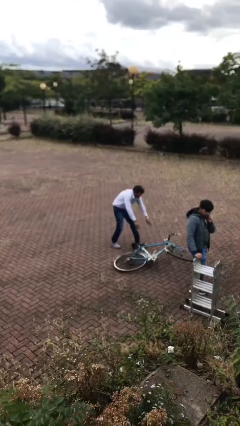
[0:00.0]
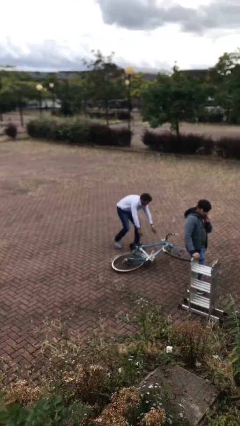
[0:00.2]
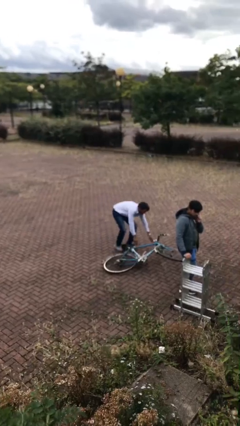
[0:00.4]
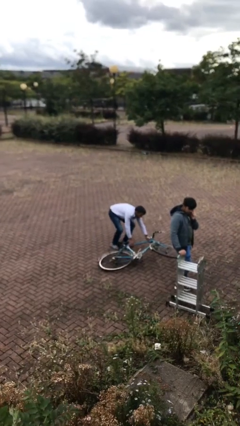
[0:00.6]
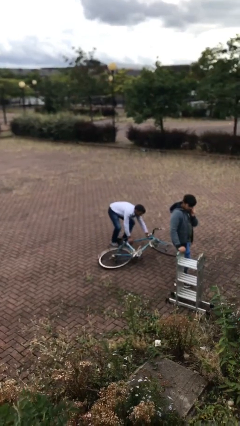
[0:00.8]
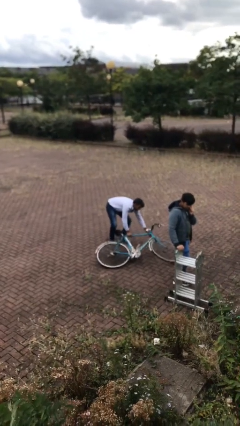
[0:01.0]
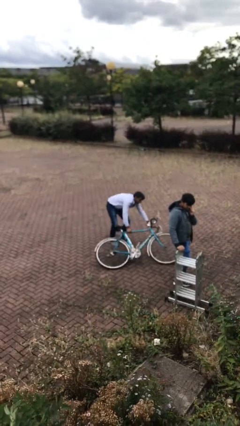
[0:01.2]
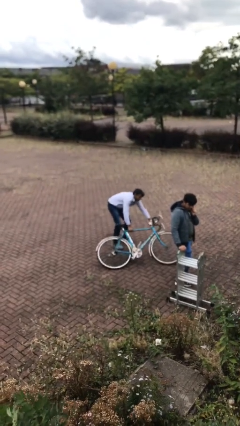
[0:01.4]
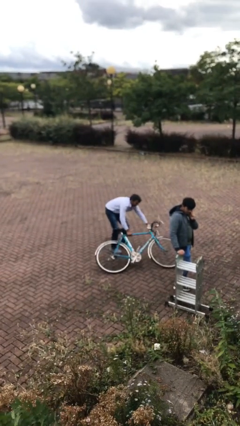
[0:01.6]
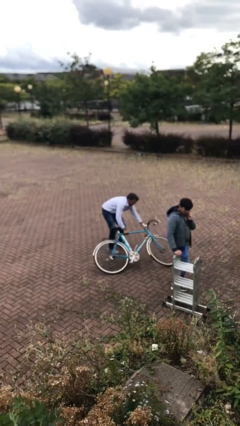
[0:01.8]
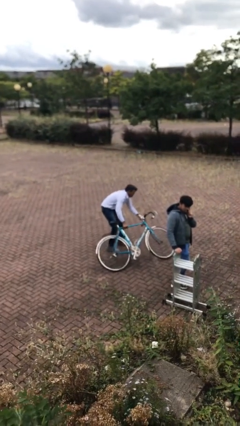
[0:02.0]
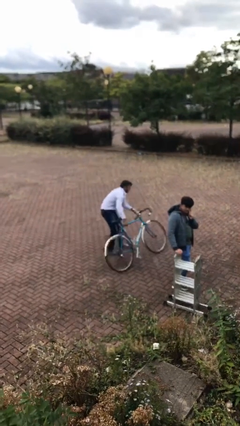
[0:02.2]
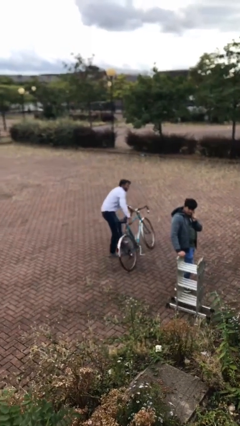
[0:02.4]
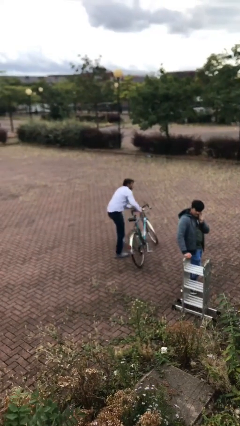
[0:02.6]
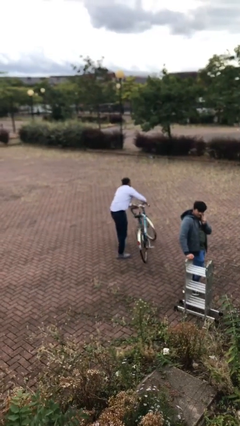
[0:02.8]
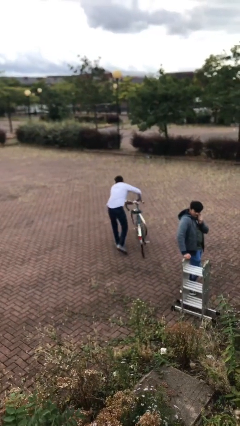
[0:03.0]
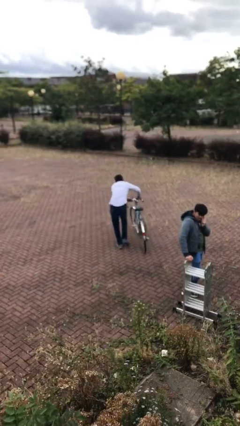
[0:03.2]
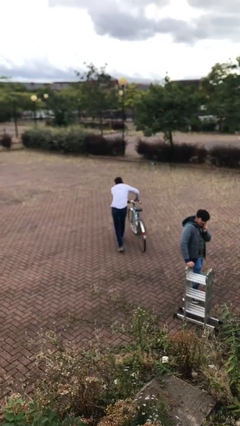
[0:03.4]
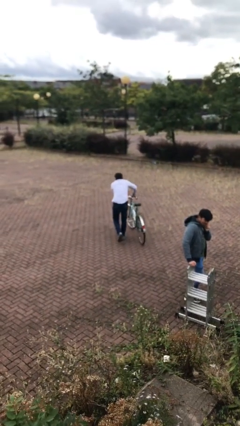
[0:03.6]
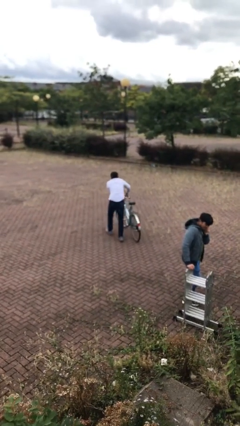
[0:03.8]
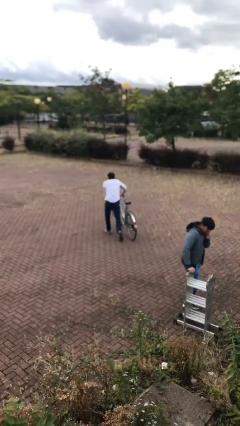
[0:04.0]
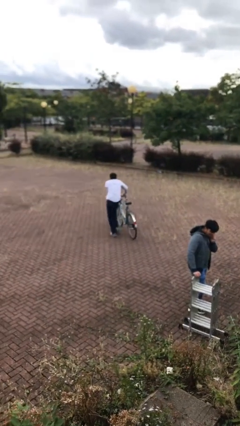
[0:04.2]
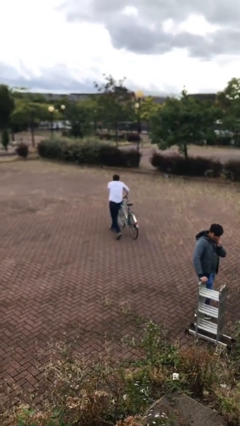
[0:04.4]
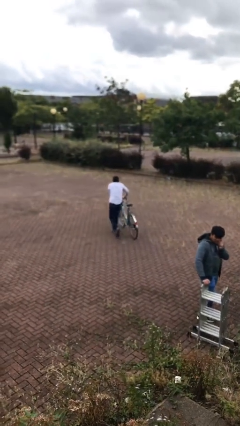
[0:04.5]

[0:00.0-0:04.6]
person steals object from person

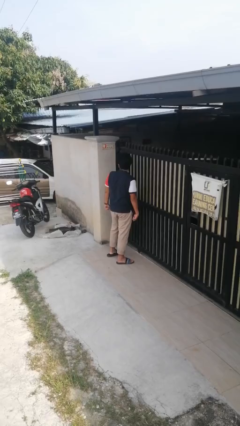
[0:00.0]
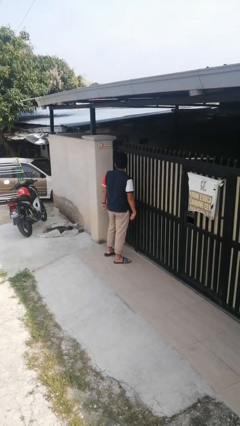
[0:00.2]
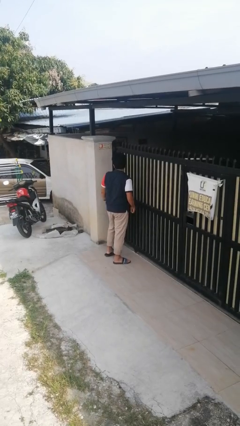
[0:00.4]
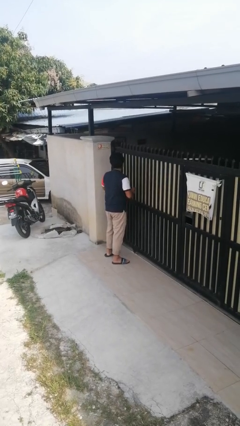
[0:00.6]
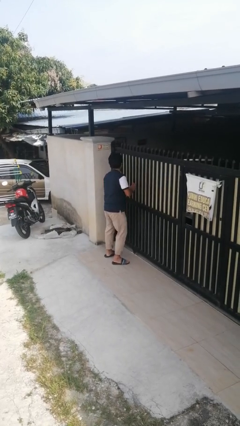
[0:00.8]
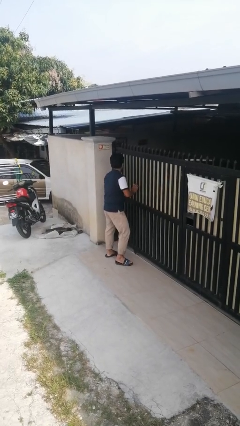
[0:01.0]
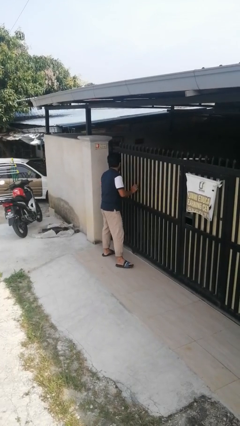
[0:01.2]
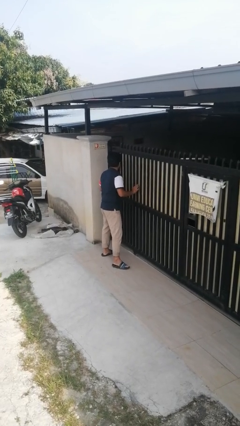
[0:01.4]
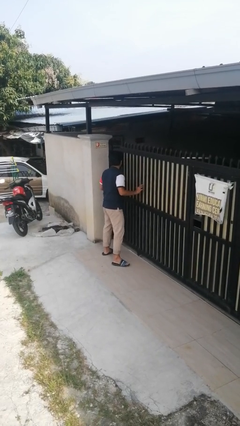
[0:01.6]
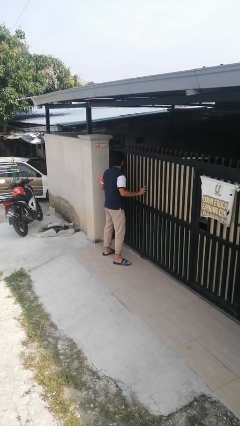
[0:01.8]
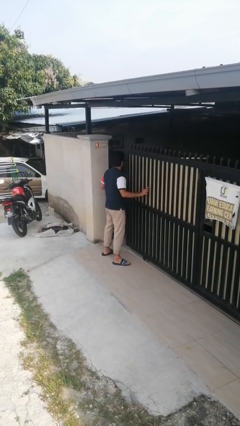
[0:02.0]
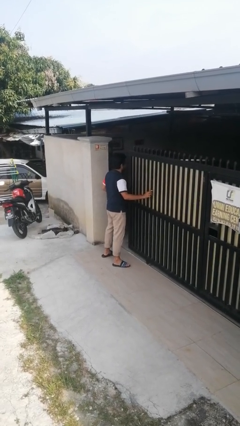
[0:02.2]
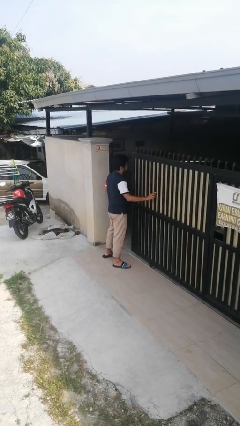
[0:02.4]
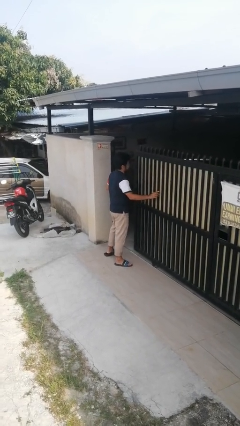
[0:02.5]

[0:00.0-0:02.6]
person opens sliding door

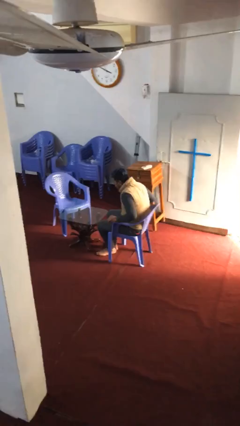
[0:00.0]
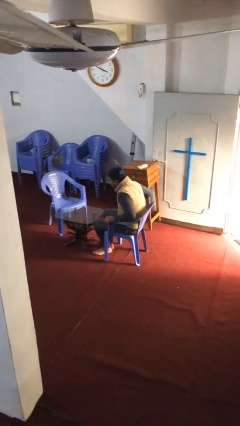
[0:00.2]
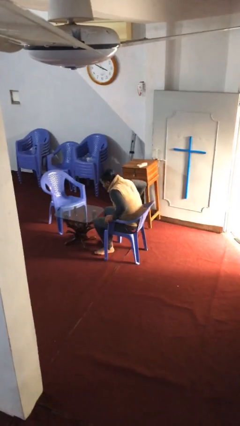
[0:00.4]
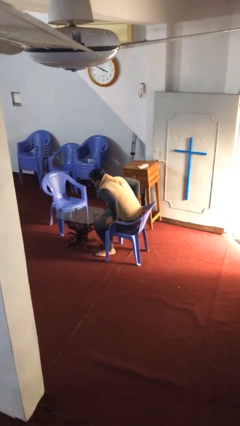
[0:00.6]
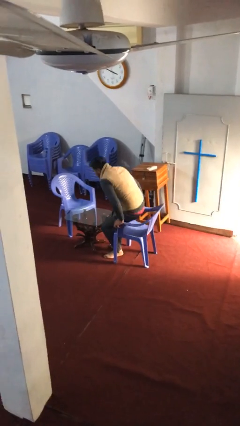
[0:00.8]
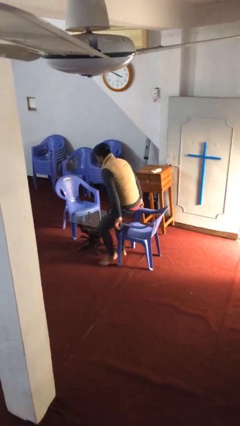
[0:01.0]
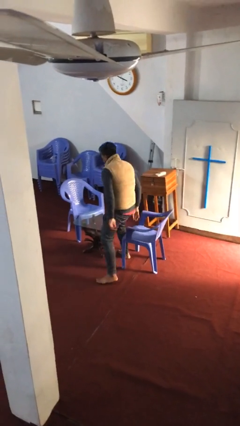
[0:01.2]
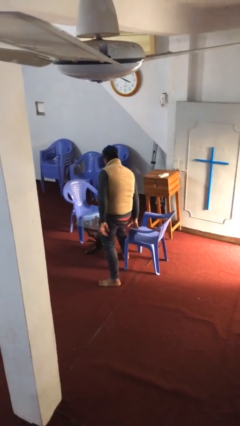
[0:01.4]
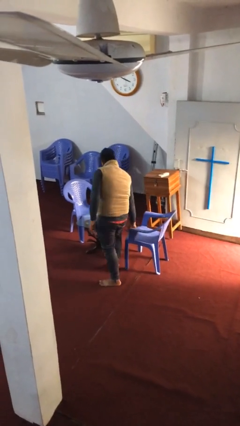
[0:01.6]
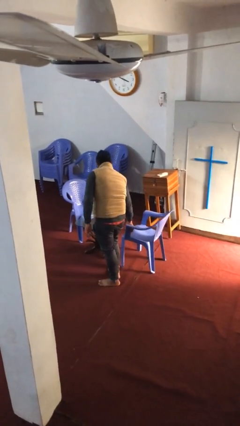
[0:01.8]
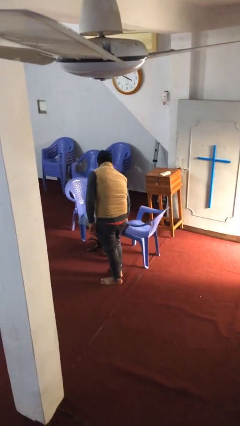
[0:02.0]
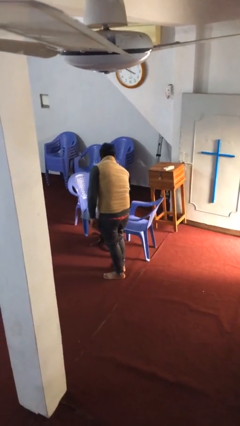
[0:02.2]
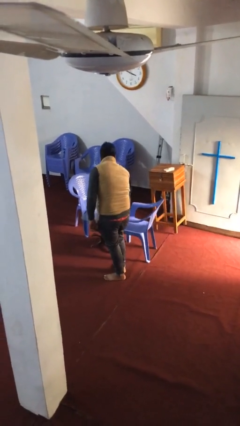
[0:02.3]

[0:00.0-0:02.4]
person stands up

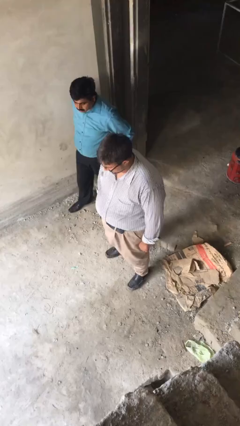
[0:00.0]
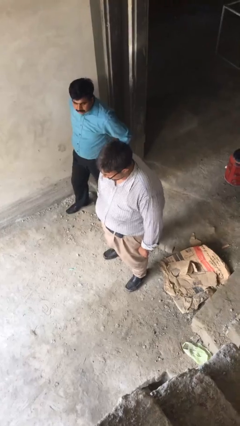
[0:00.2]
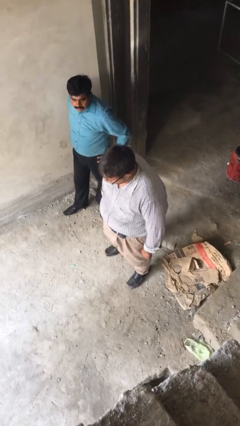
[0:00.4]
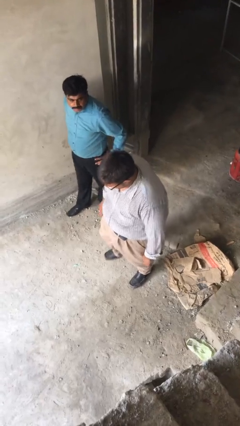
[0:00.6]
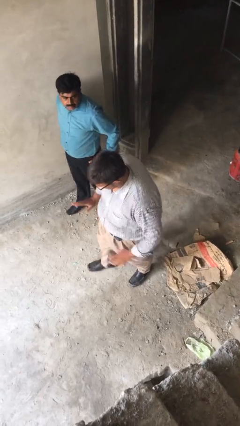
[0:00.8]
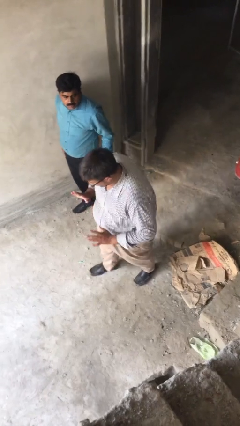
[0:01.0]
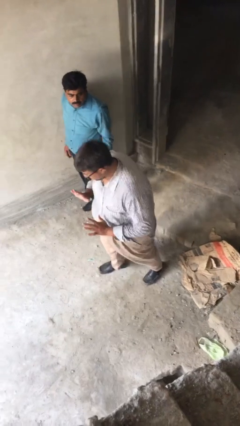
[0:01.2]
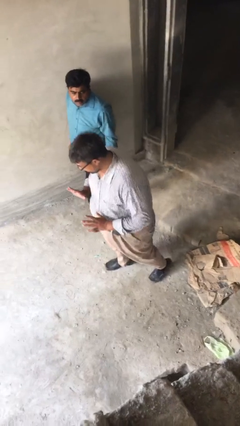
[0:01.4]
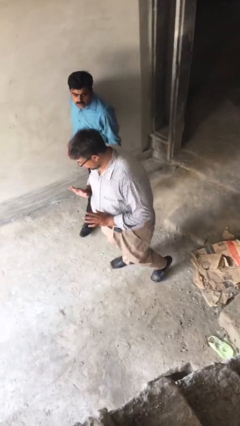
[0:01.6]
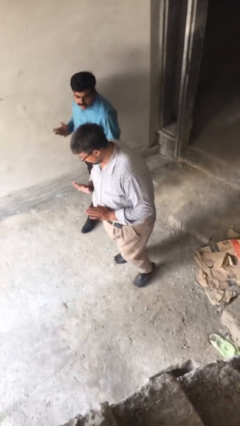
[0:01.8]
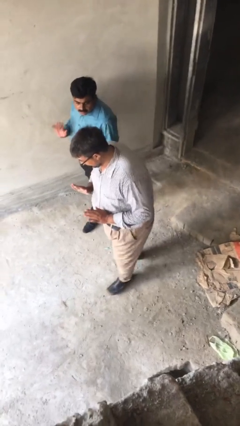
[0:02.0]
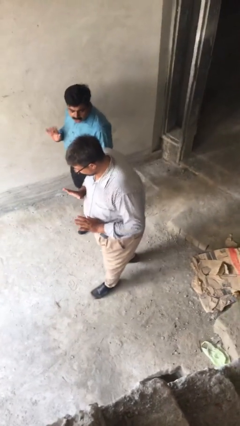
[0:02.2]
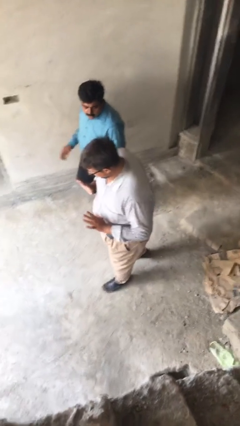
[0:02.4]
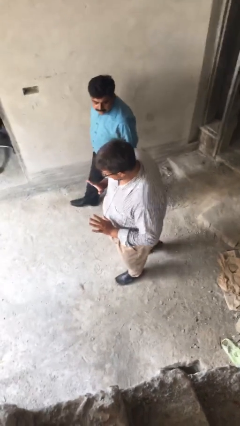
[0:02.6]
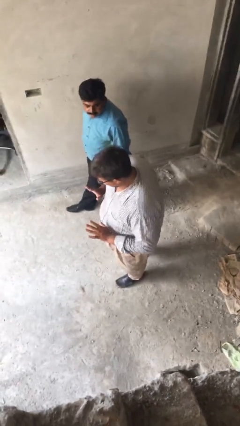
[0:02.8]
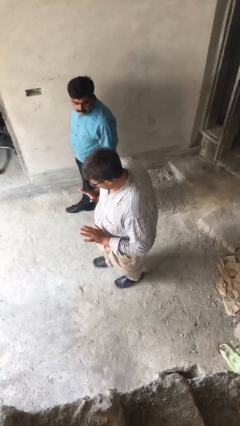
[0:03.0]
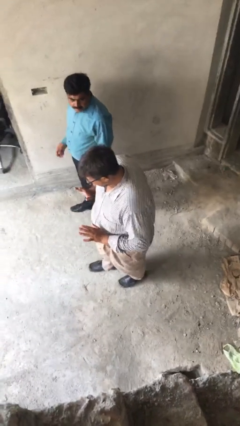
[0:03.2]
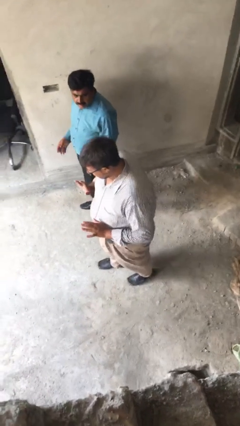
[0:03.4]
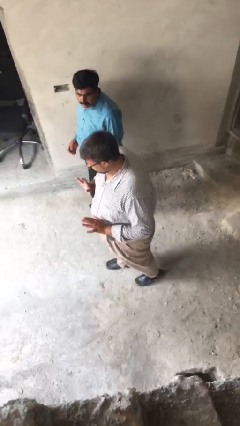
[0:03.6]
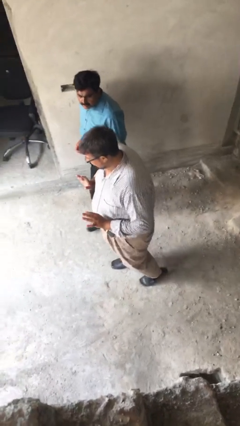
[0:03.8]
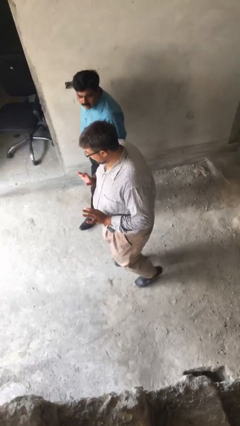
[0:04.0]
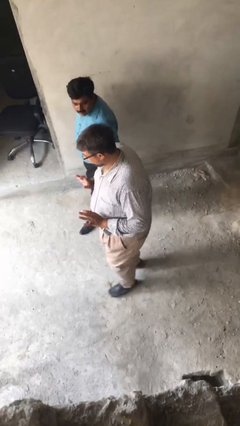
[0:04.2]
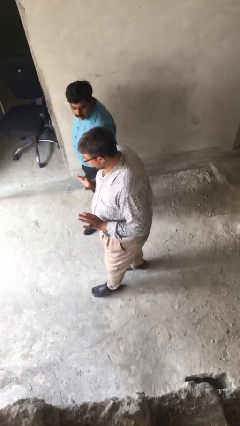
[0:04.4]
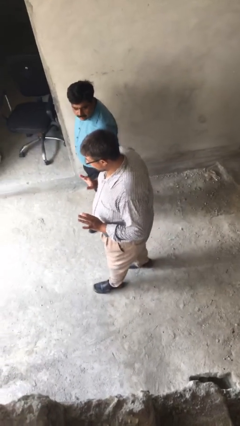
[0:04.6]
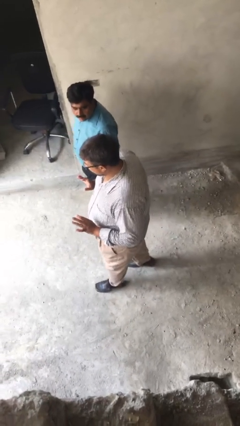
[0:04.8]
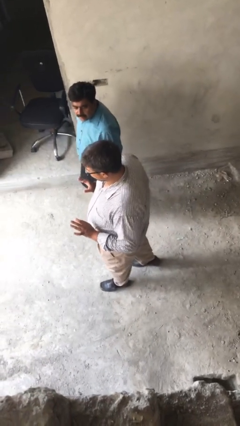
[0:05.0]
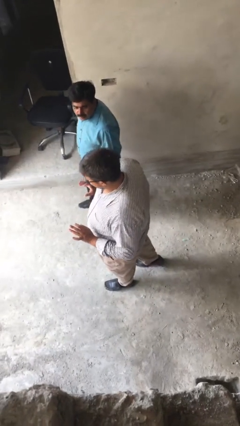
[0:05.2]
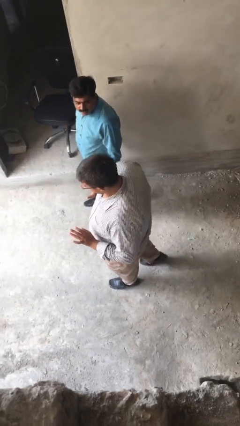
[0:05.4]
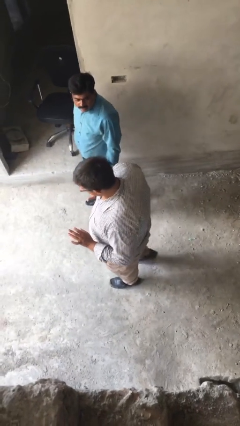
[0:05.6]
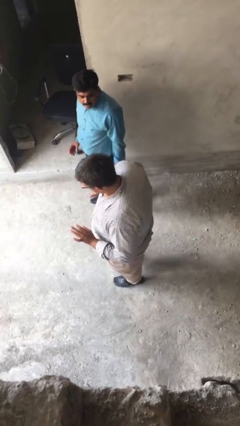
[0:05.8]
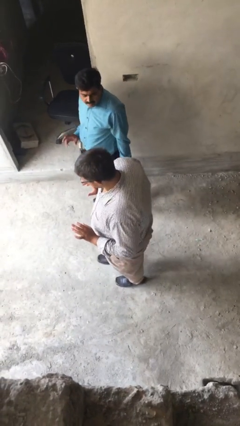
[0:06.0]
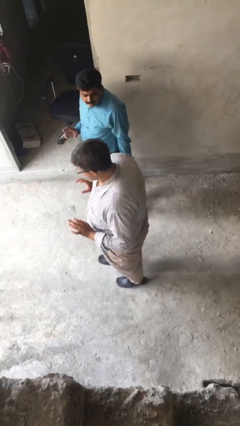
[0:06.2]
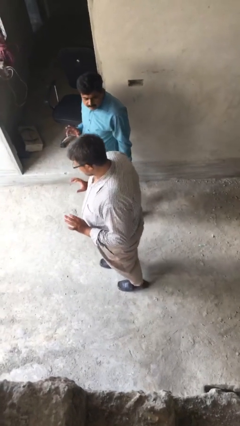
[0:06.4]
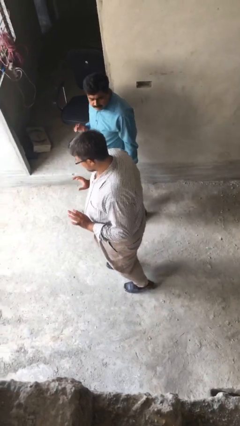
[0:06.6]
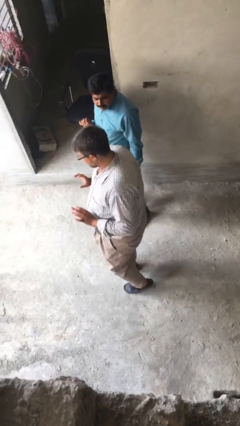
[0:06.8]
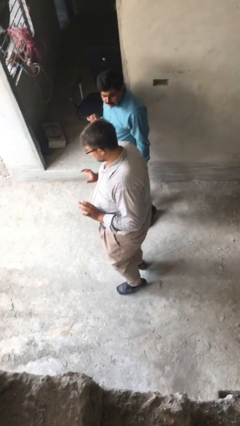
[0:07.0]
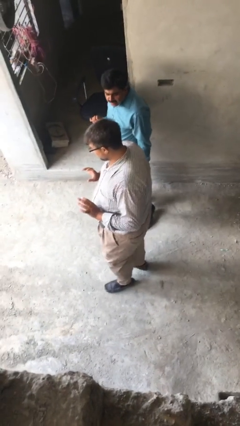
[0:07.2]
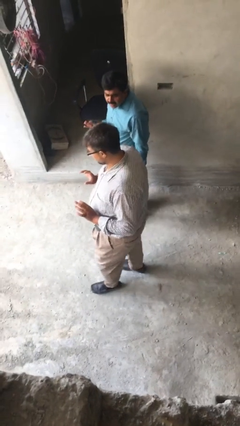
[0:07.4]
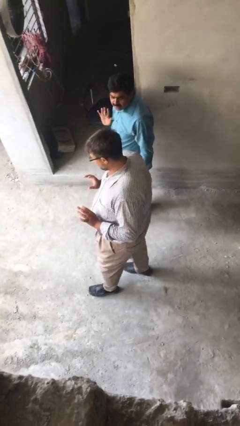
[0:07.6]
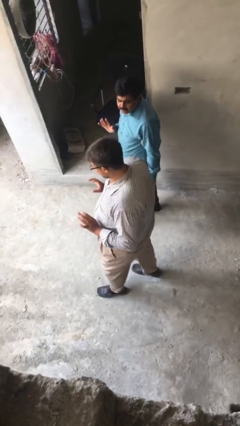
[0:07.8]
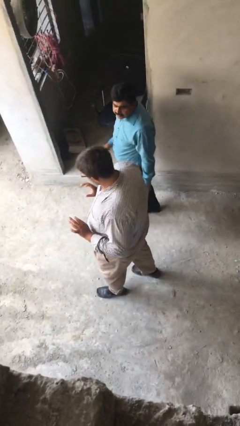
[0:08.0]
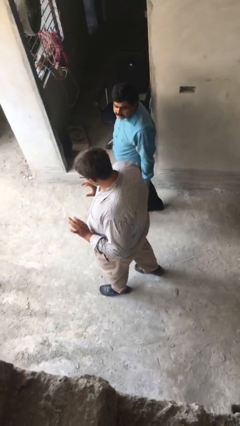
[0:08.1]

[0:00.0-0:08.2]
person talks to person
